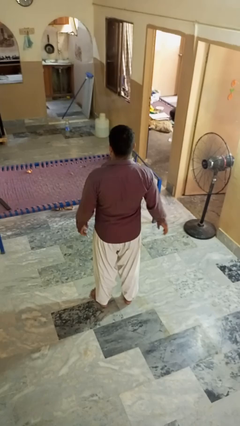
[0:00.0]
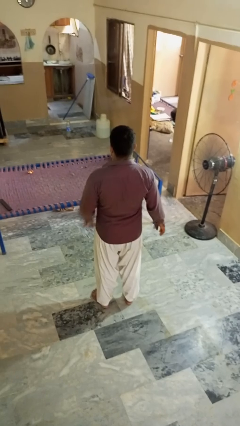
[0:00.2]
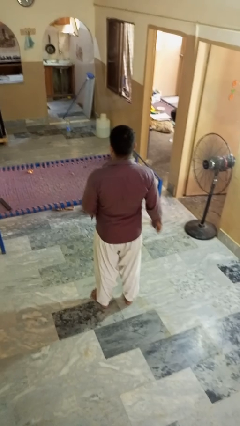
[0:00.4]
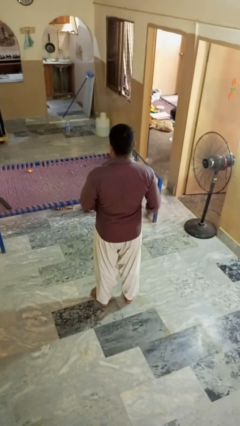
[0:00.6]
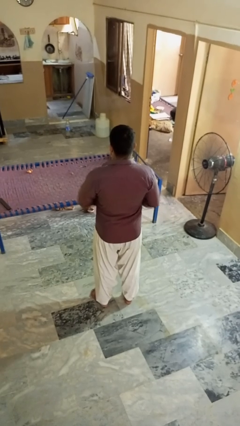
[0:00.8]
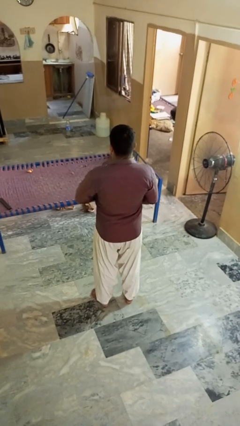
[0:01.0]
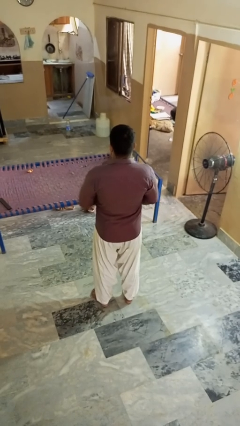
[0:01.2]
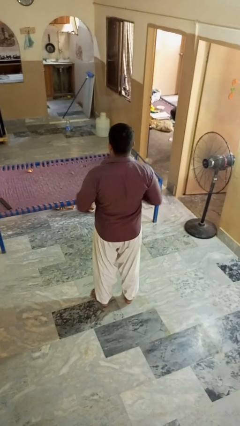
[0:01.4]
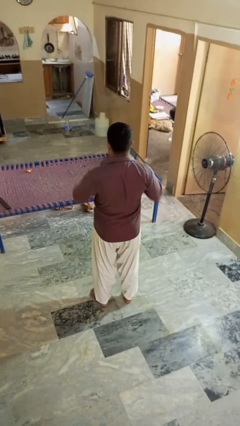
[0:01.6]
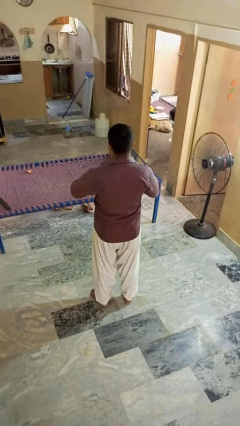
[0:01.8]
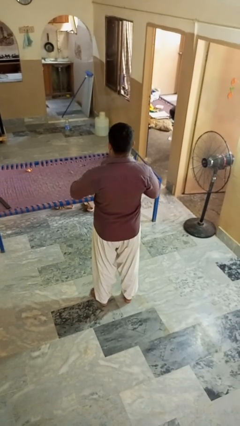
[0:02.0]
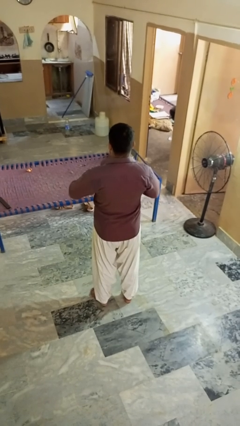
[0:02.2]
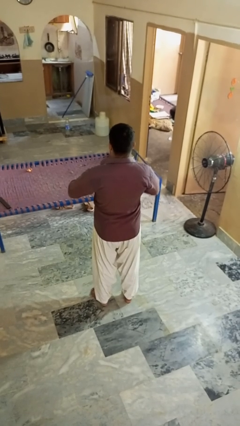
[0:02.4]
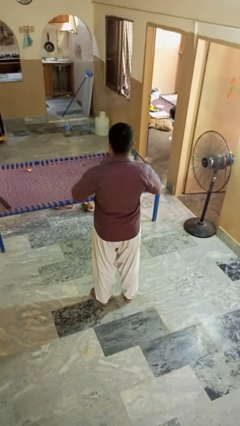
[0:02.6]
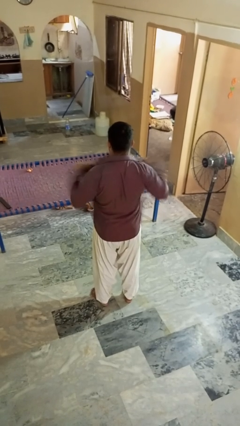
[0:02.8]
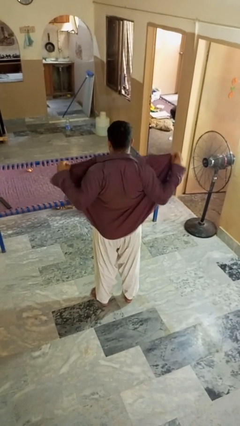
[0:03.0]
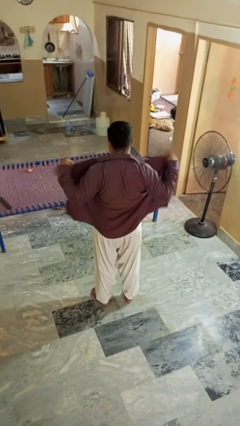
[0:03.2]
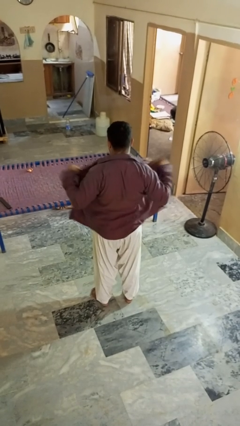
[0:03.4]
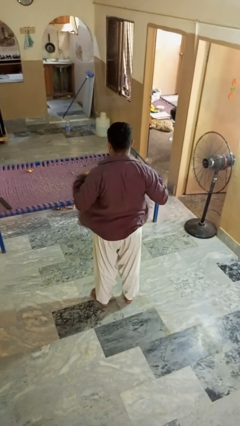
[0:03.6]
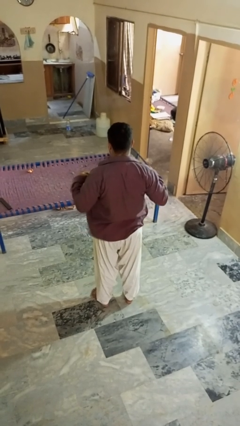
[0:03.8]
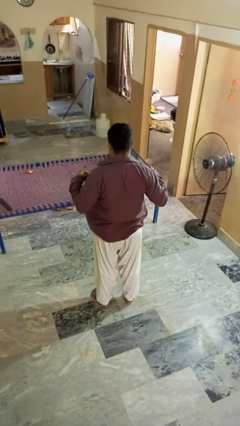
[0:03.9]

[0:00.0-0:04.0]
person unbuttons shirt

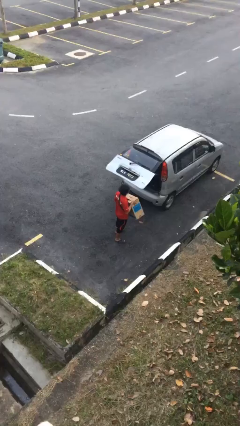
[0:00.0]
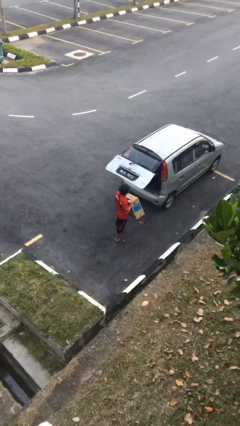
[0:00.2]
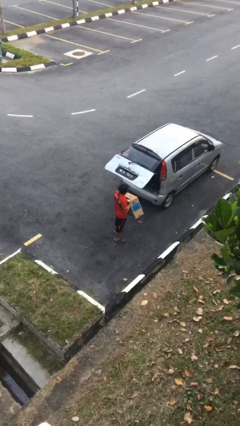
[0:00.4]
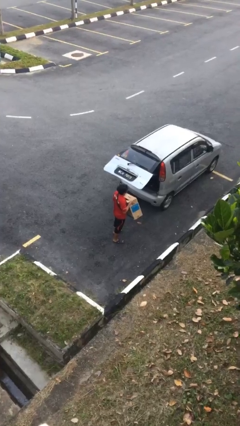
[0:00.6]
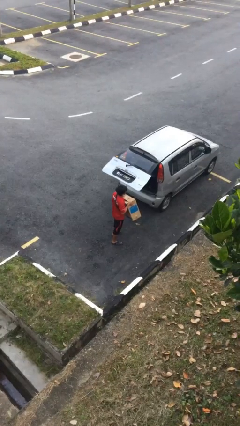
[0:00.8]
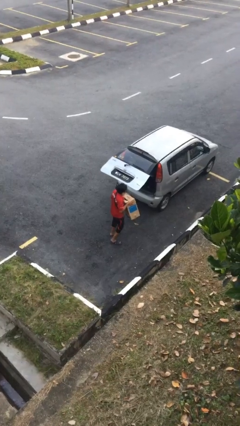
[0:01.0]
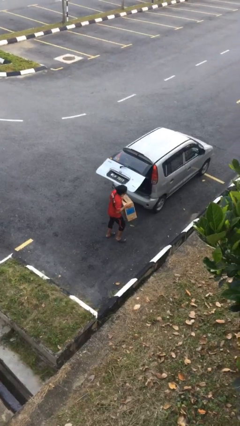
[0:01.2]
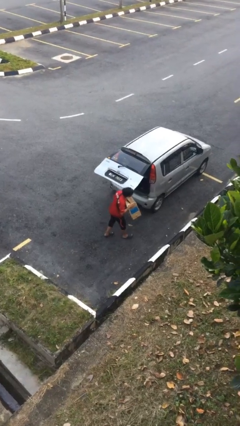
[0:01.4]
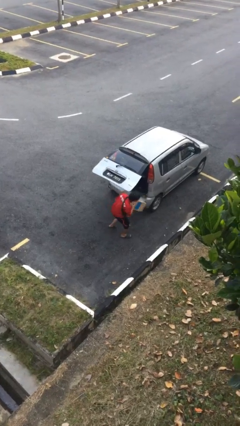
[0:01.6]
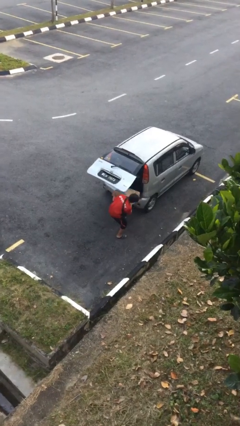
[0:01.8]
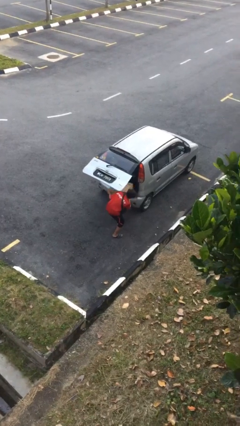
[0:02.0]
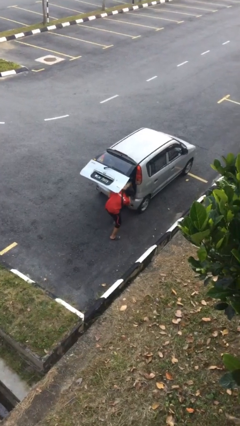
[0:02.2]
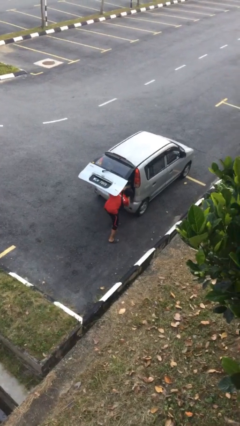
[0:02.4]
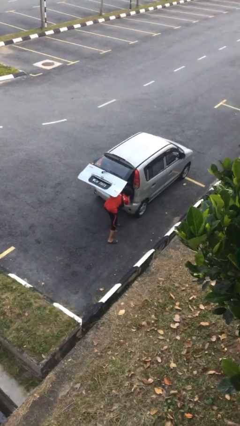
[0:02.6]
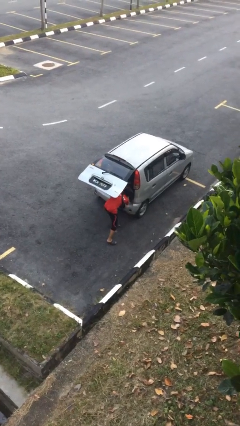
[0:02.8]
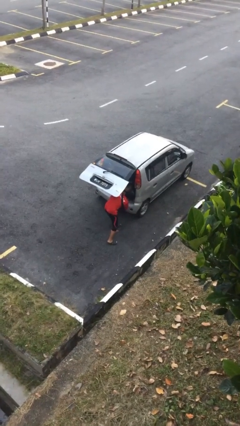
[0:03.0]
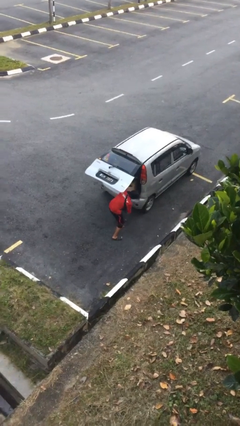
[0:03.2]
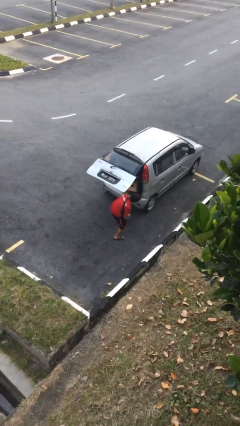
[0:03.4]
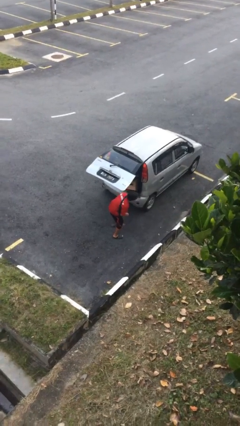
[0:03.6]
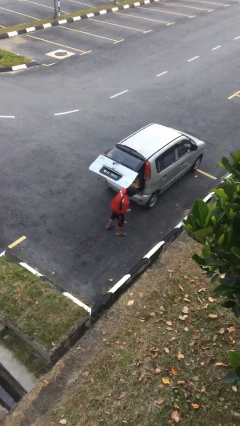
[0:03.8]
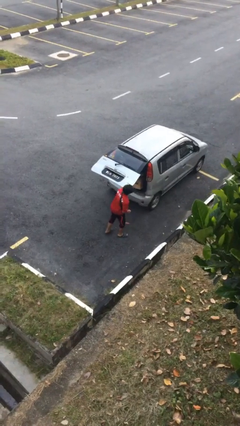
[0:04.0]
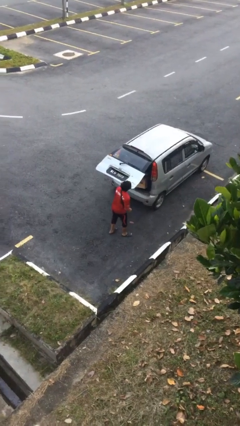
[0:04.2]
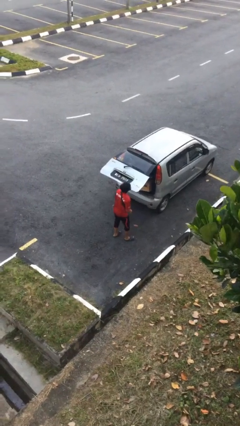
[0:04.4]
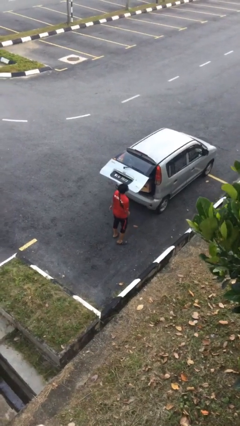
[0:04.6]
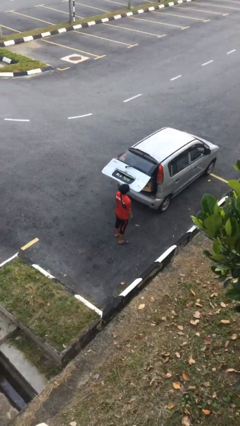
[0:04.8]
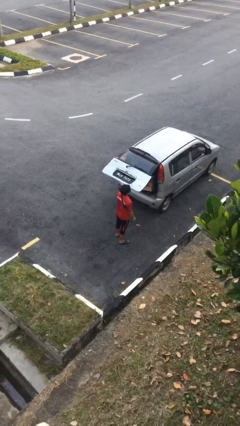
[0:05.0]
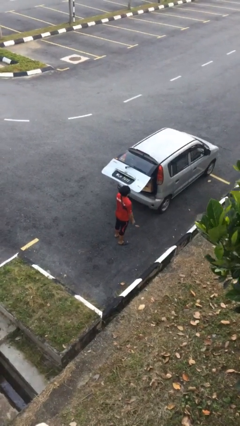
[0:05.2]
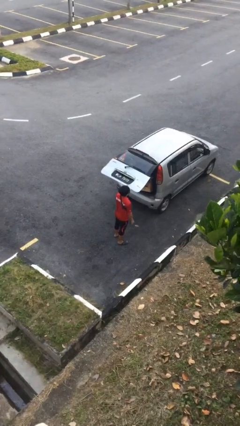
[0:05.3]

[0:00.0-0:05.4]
person loads car

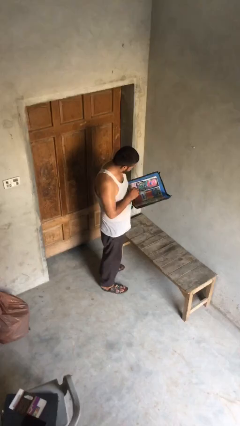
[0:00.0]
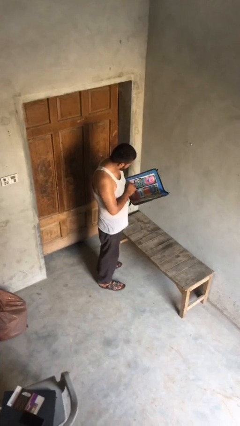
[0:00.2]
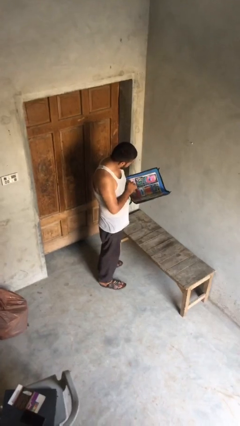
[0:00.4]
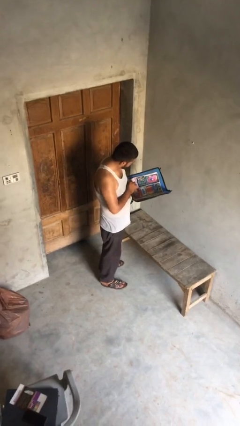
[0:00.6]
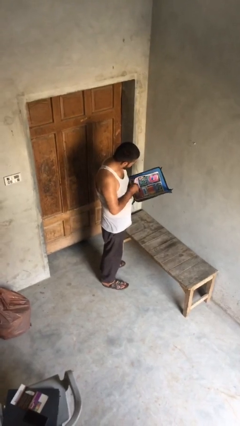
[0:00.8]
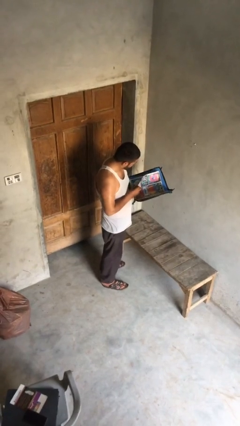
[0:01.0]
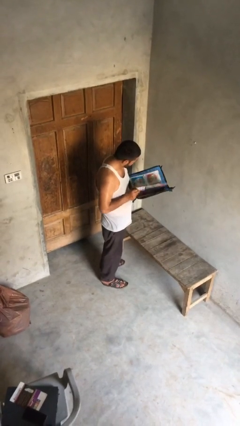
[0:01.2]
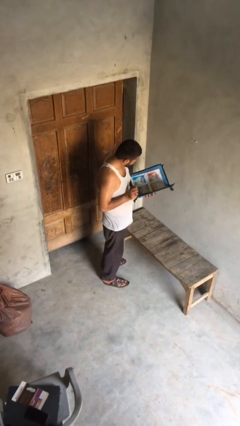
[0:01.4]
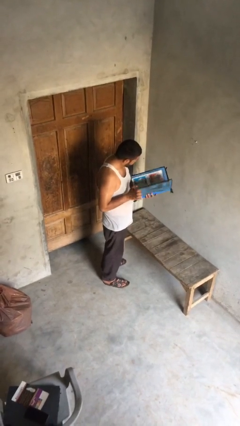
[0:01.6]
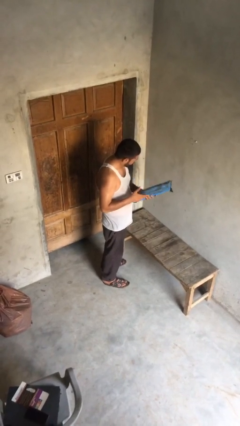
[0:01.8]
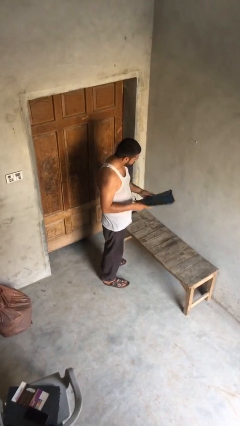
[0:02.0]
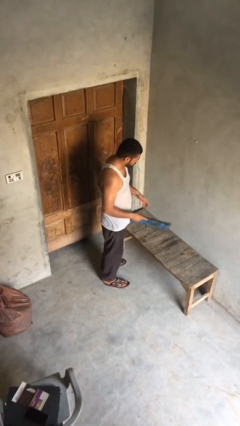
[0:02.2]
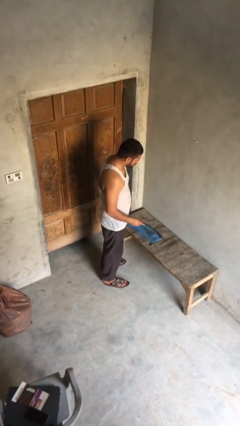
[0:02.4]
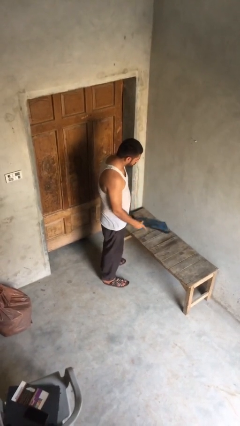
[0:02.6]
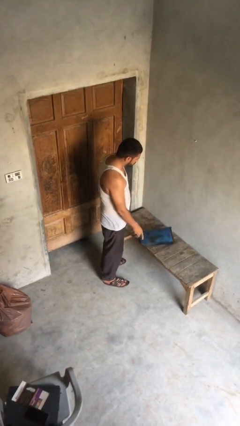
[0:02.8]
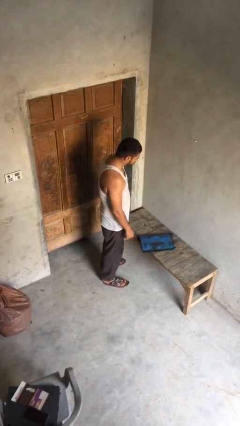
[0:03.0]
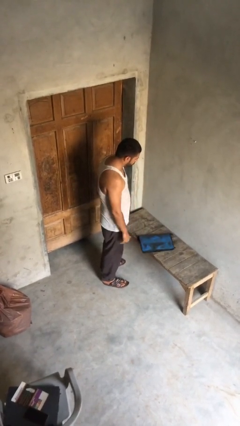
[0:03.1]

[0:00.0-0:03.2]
person puts down object on table

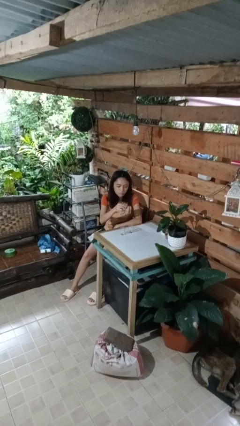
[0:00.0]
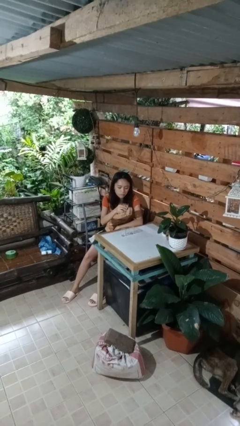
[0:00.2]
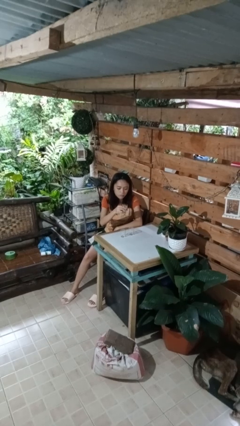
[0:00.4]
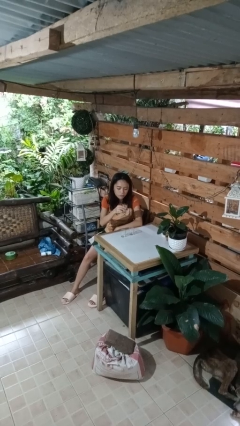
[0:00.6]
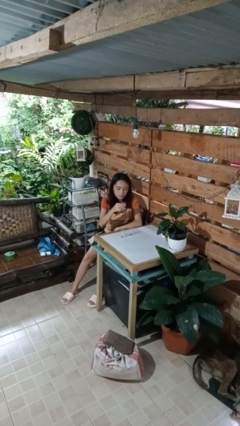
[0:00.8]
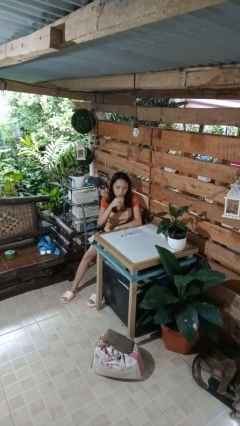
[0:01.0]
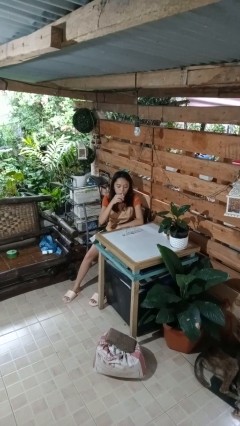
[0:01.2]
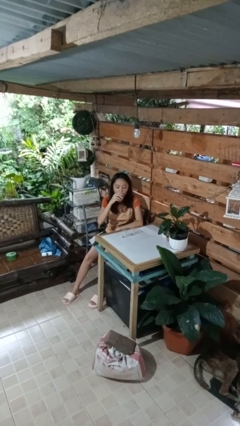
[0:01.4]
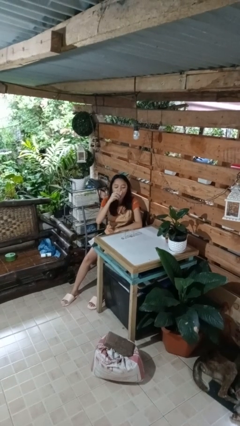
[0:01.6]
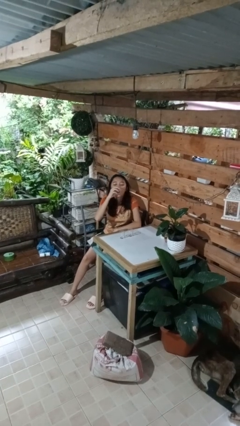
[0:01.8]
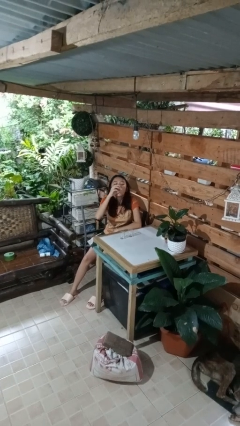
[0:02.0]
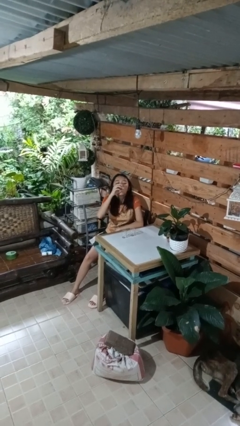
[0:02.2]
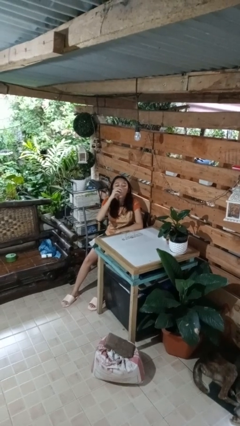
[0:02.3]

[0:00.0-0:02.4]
person drinks from shotglass

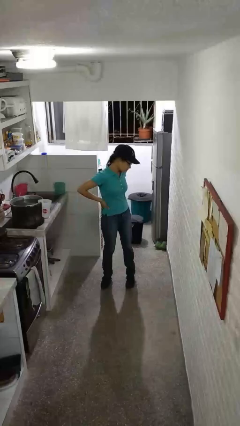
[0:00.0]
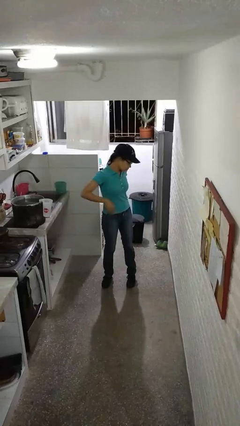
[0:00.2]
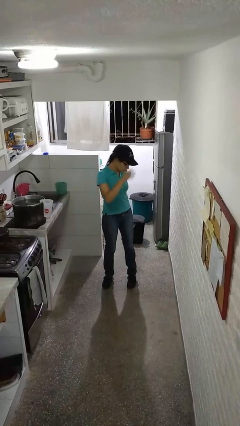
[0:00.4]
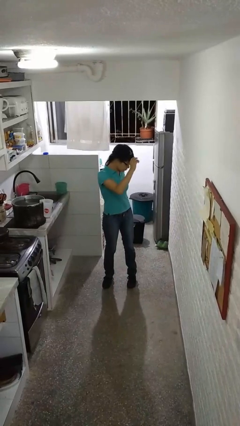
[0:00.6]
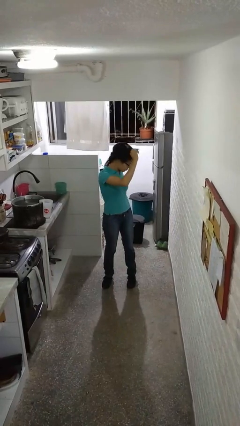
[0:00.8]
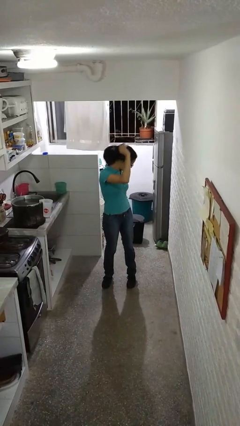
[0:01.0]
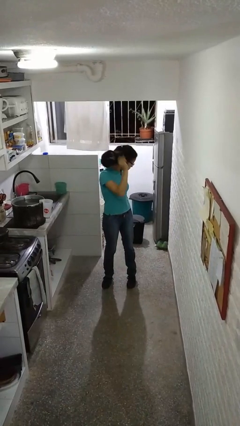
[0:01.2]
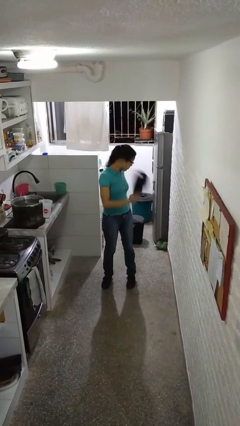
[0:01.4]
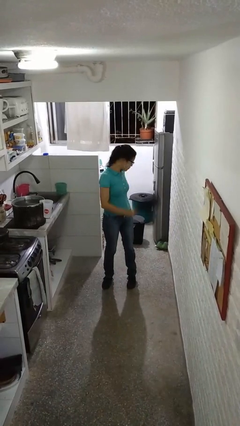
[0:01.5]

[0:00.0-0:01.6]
person takes off hat

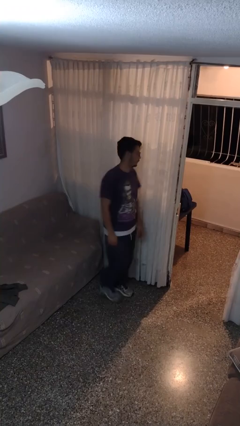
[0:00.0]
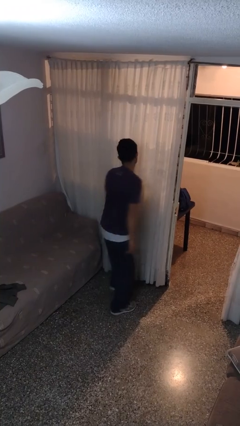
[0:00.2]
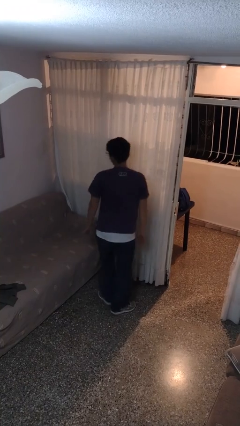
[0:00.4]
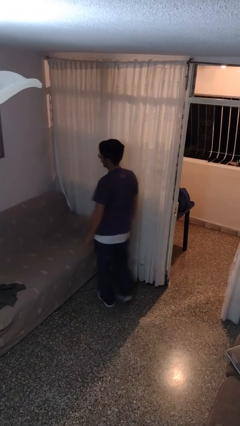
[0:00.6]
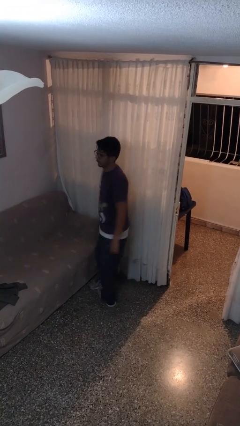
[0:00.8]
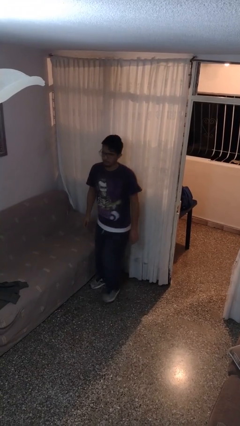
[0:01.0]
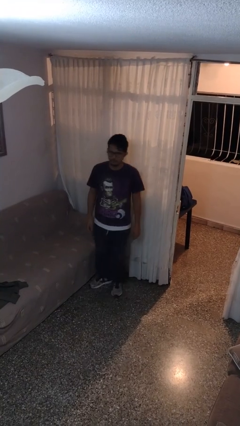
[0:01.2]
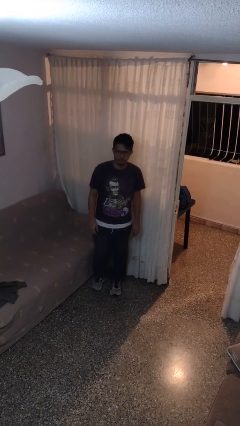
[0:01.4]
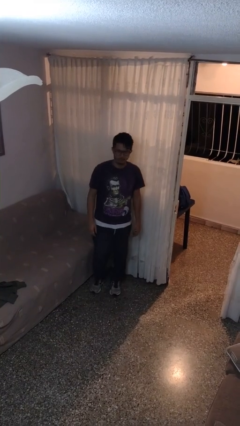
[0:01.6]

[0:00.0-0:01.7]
person twirls
